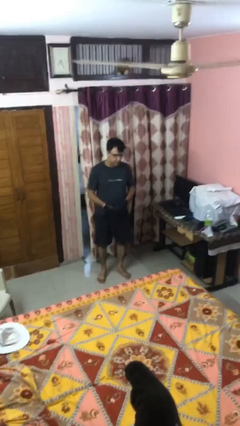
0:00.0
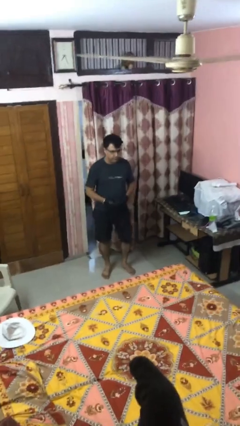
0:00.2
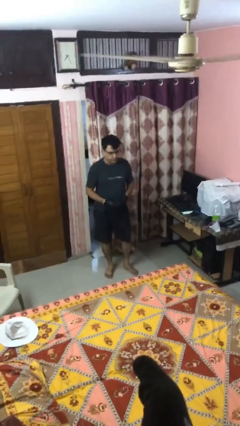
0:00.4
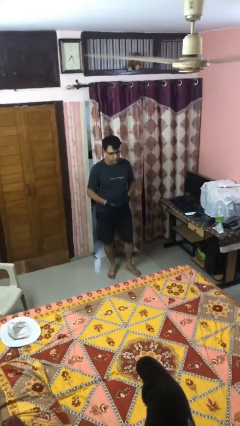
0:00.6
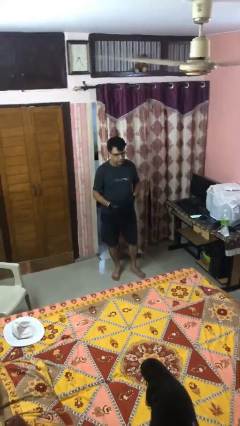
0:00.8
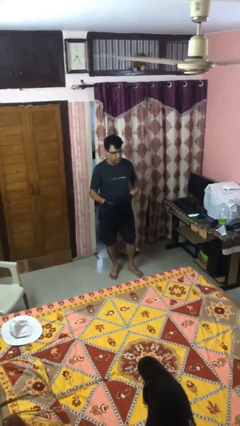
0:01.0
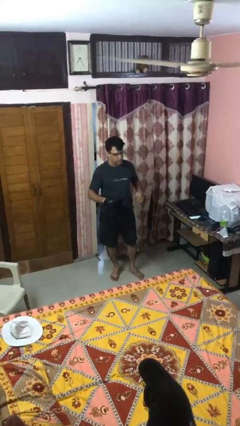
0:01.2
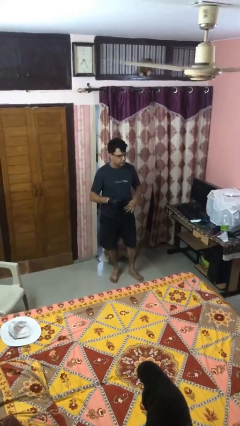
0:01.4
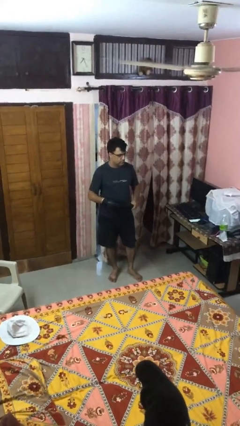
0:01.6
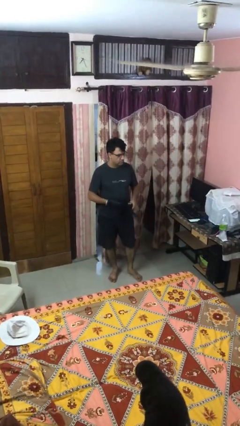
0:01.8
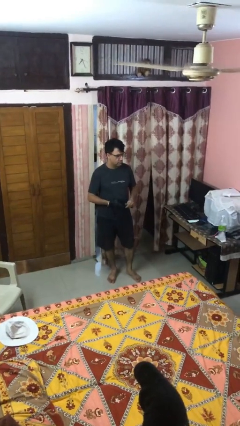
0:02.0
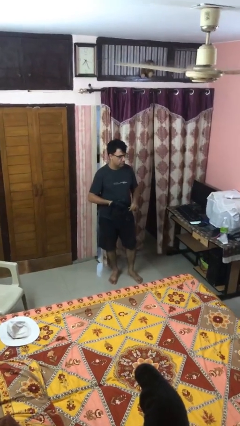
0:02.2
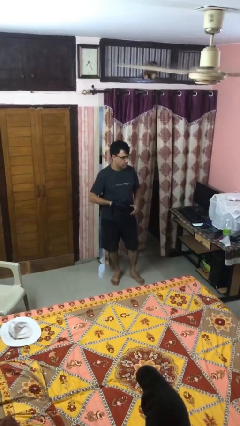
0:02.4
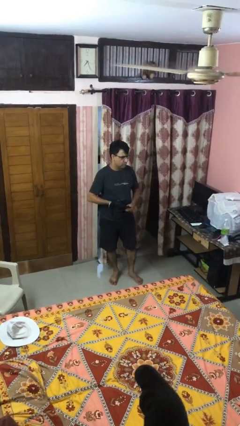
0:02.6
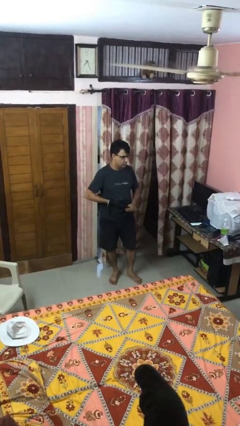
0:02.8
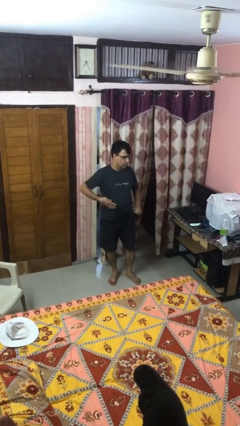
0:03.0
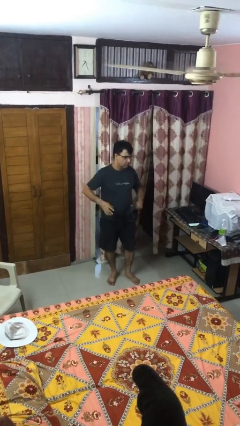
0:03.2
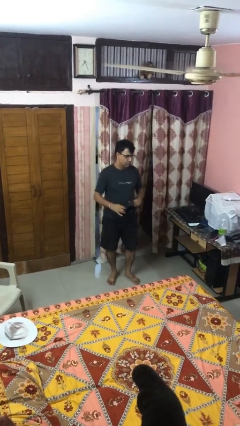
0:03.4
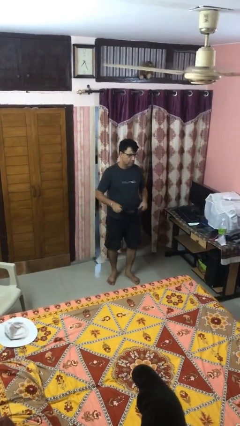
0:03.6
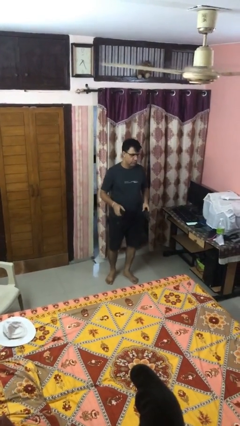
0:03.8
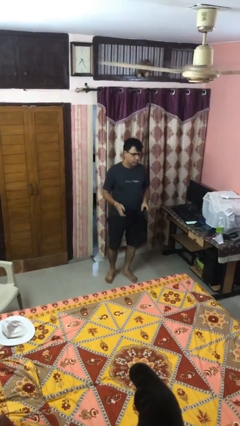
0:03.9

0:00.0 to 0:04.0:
person takes off gloves

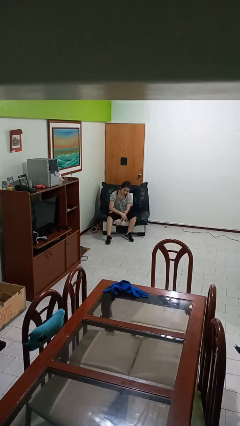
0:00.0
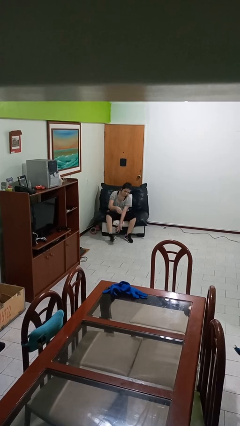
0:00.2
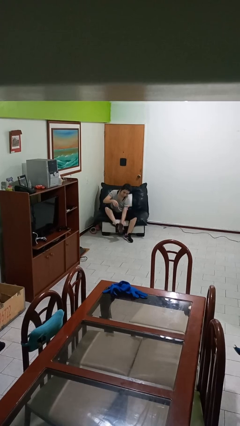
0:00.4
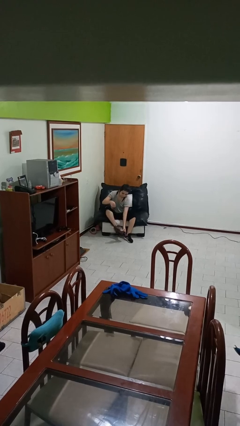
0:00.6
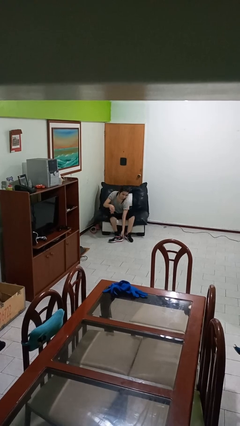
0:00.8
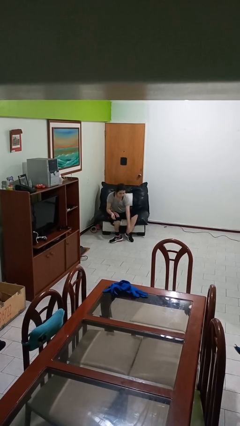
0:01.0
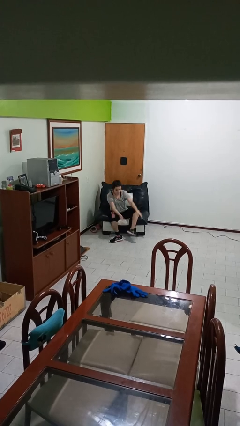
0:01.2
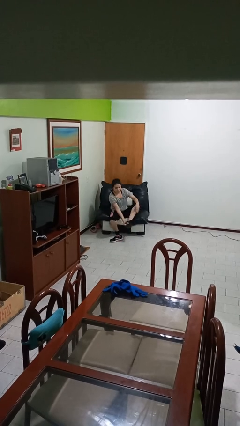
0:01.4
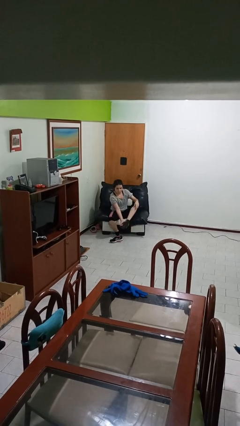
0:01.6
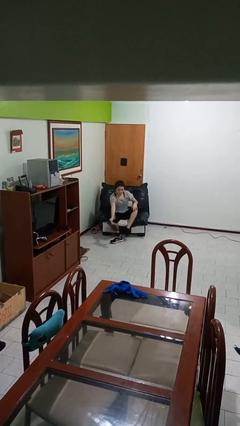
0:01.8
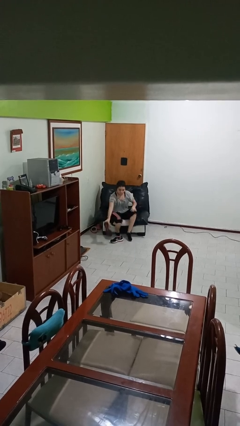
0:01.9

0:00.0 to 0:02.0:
person takes off shoes

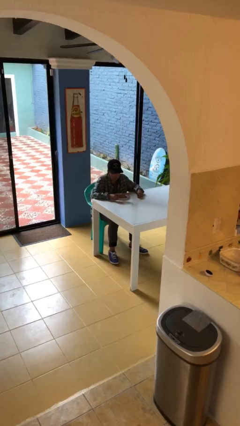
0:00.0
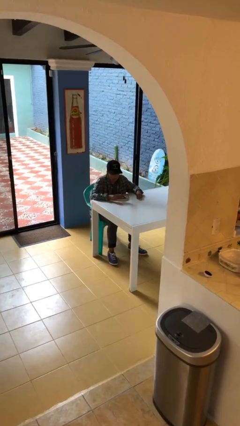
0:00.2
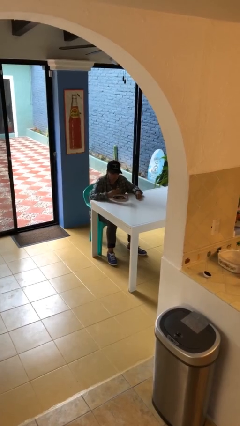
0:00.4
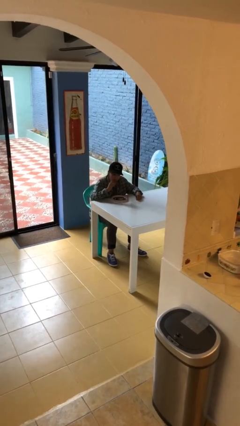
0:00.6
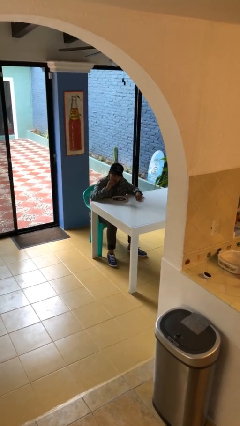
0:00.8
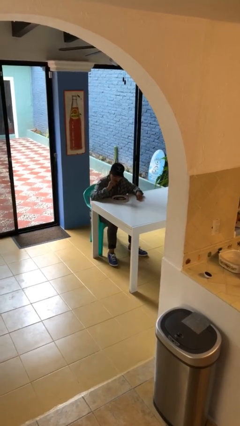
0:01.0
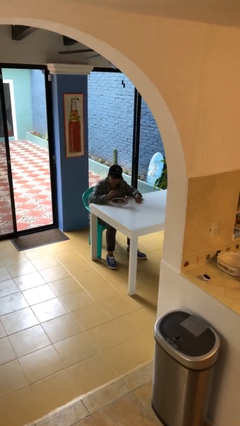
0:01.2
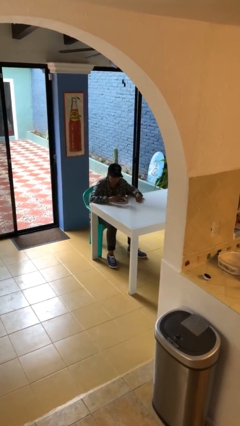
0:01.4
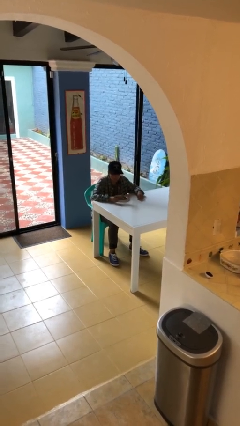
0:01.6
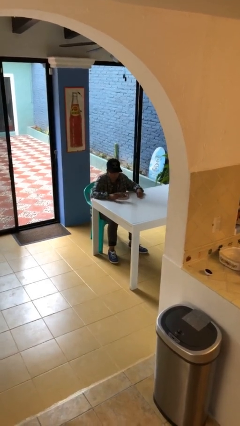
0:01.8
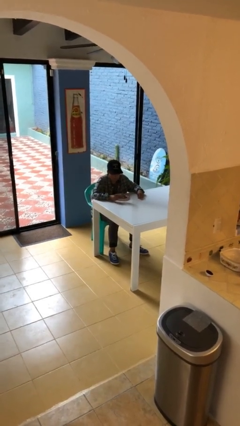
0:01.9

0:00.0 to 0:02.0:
person eats with hands

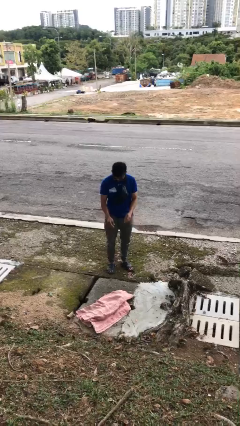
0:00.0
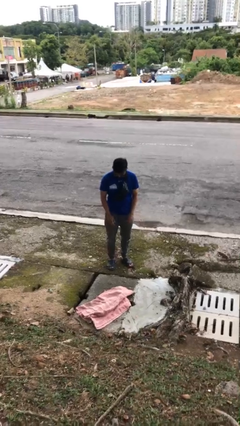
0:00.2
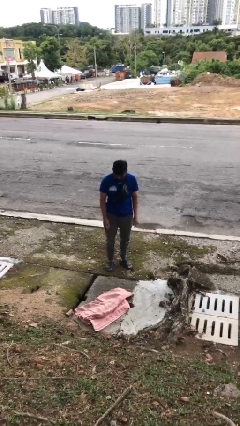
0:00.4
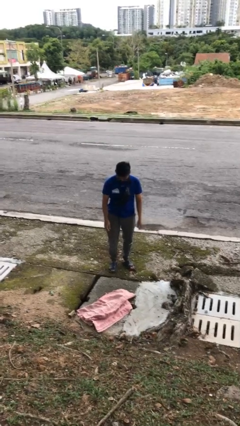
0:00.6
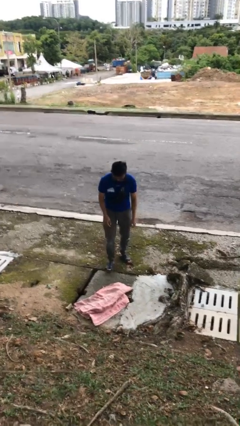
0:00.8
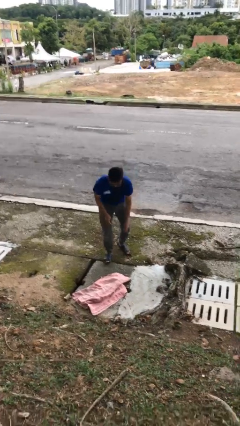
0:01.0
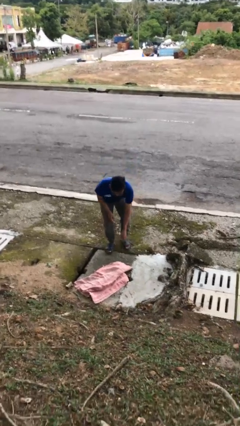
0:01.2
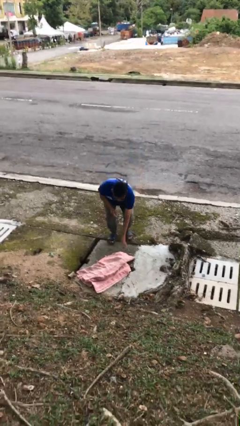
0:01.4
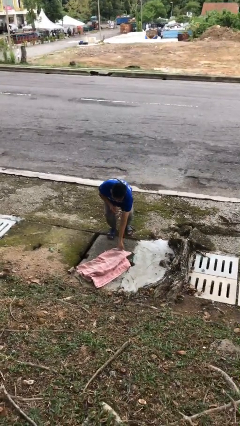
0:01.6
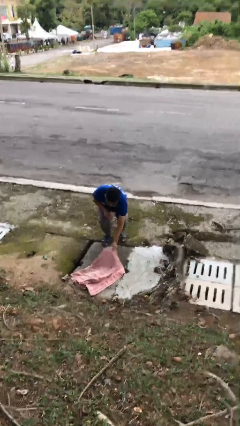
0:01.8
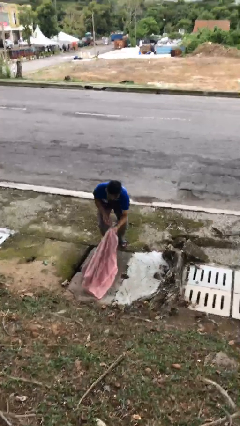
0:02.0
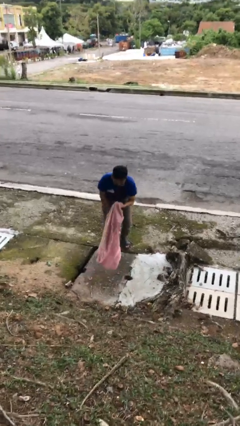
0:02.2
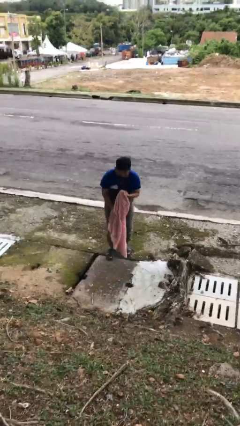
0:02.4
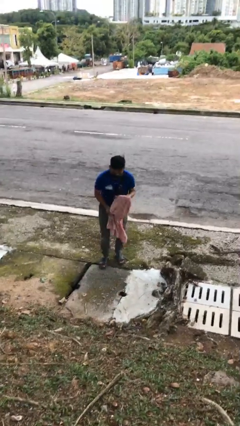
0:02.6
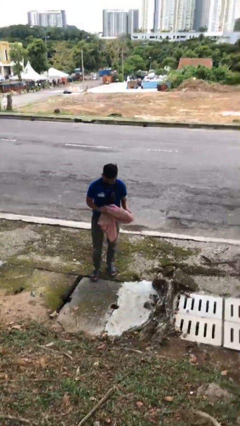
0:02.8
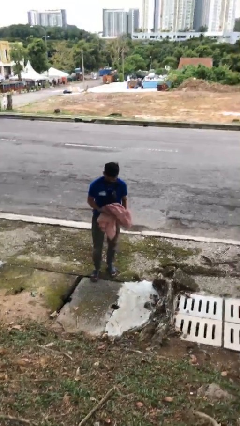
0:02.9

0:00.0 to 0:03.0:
person picks up object from floor

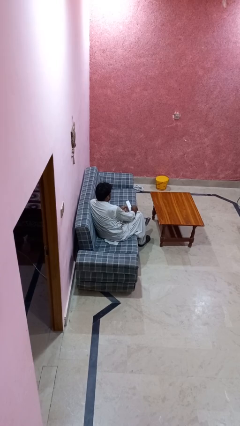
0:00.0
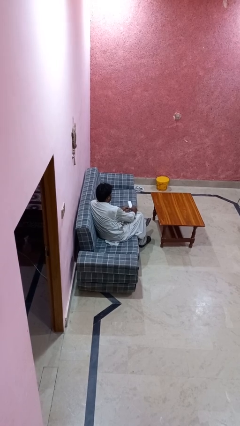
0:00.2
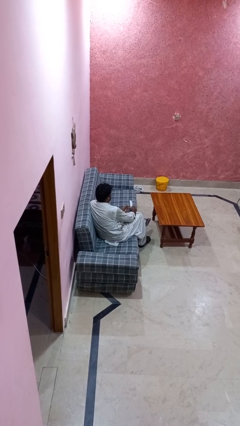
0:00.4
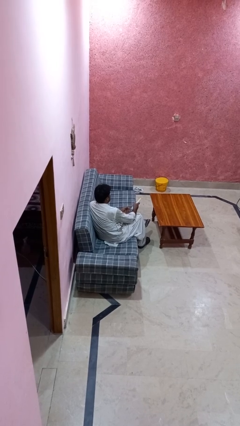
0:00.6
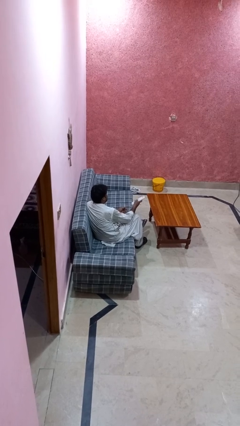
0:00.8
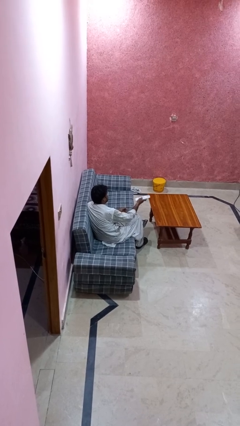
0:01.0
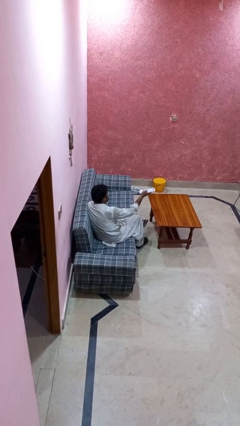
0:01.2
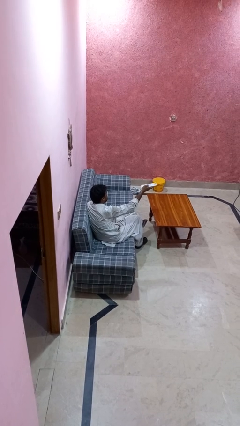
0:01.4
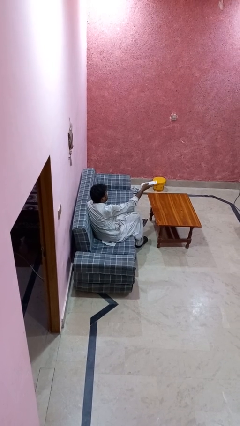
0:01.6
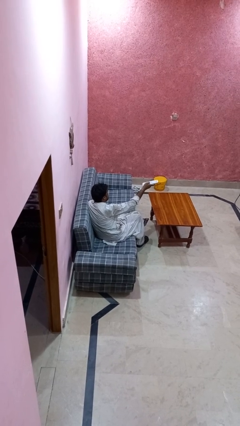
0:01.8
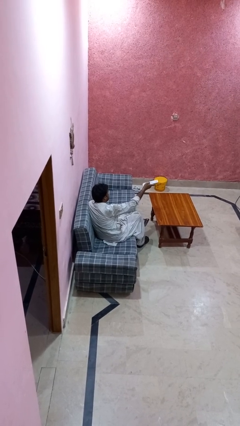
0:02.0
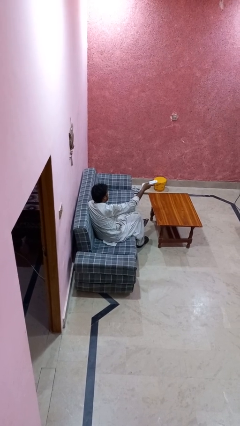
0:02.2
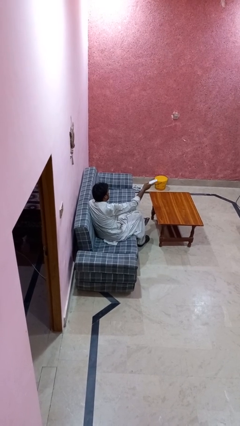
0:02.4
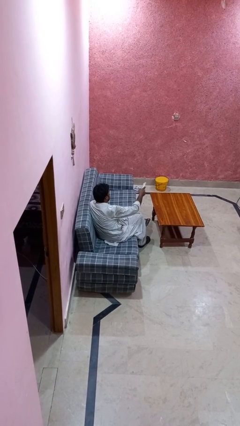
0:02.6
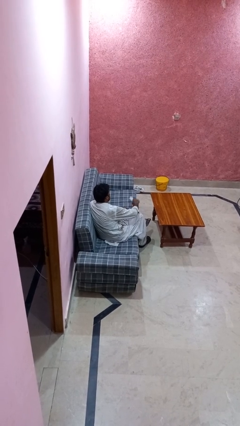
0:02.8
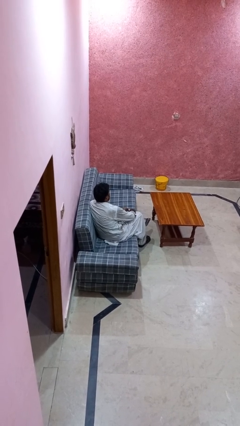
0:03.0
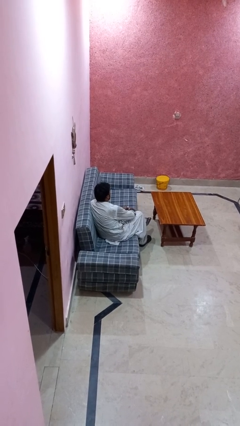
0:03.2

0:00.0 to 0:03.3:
person uses television remote

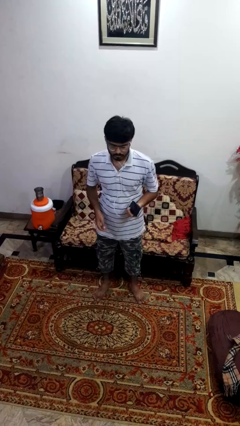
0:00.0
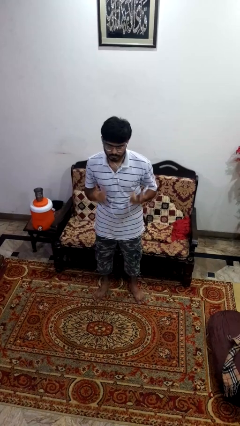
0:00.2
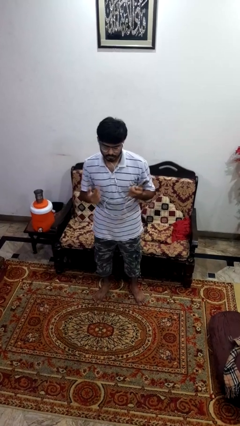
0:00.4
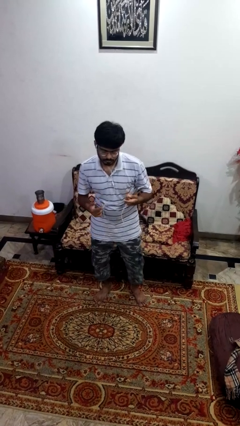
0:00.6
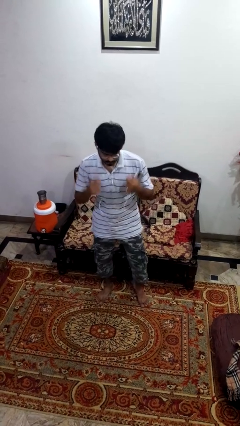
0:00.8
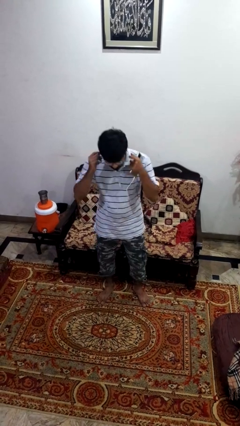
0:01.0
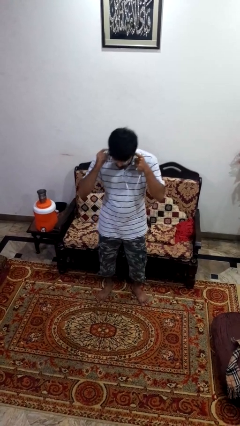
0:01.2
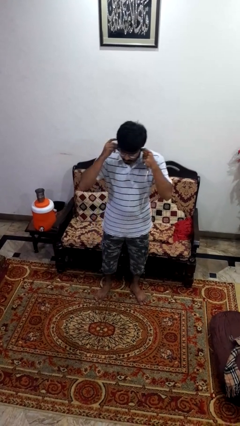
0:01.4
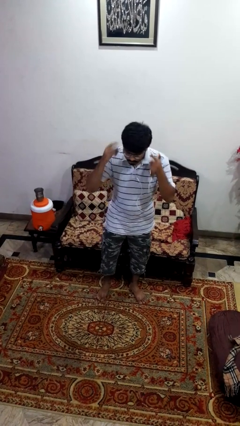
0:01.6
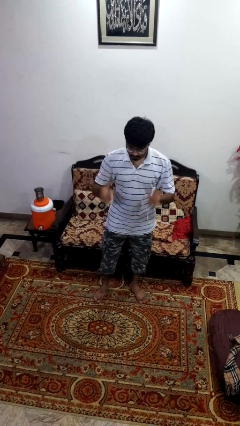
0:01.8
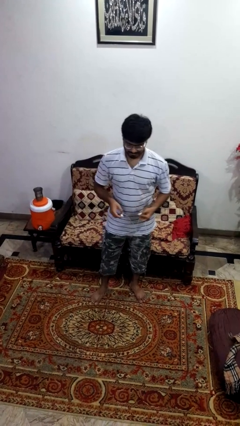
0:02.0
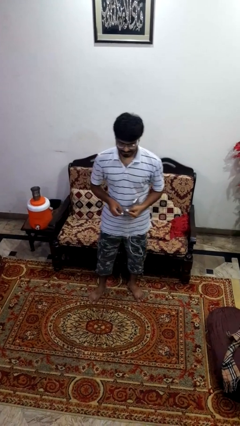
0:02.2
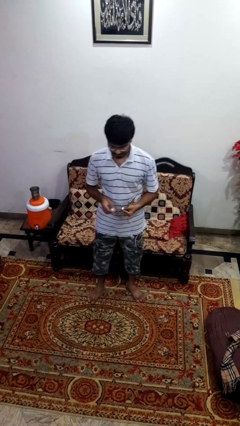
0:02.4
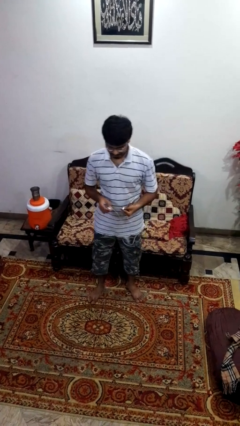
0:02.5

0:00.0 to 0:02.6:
person takes off headphones

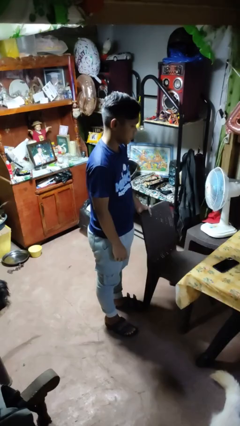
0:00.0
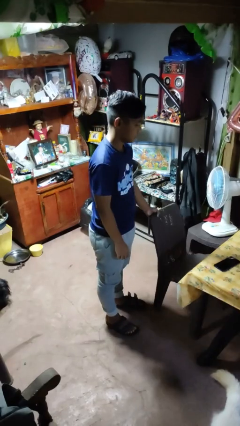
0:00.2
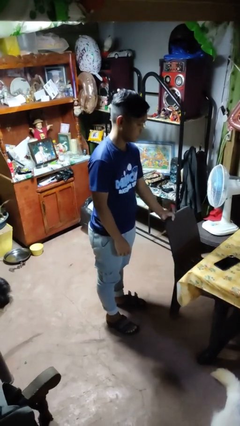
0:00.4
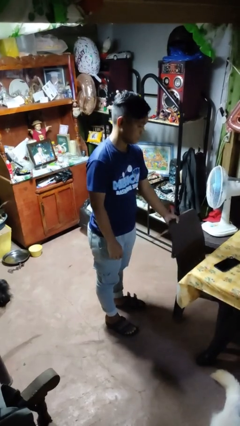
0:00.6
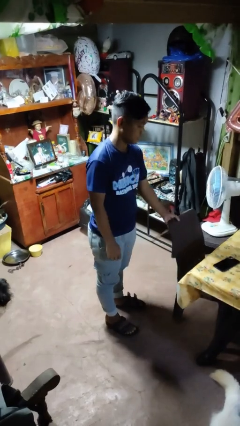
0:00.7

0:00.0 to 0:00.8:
person pushes in chair
